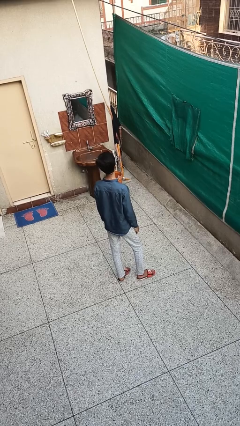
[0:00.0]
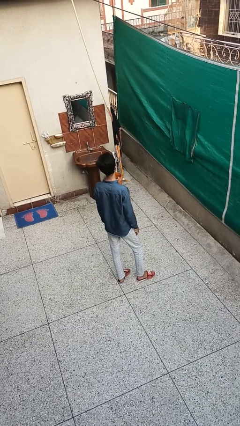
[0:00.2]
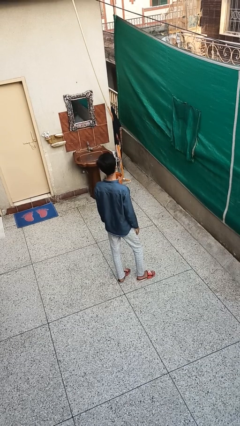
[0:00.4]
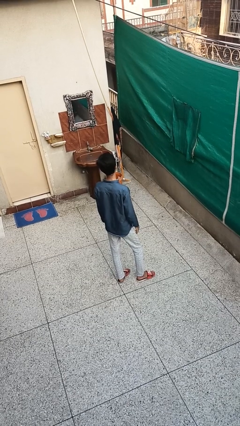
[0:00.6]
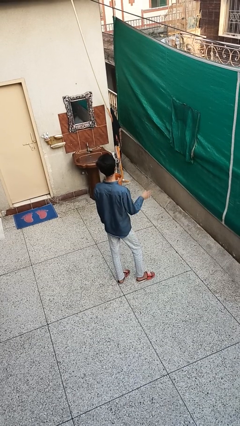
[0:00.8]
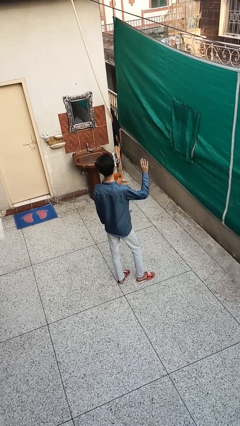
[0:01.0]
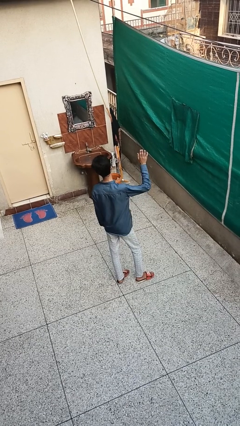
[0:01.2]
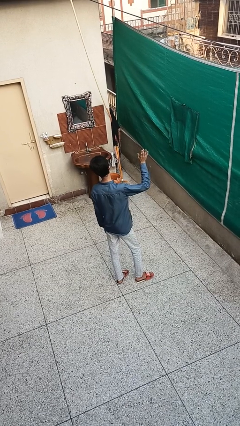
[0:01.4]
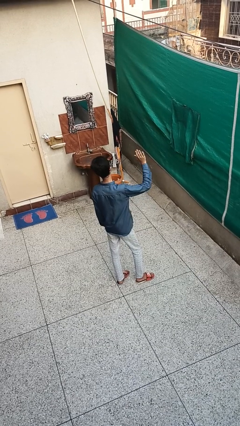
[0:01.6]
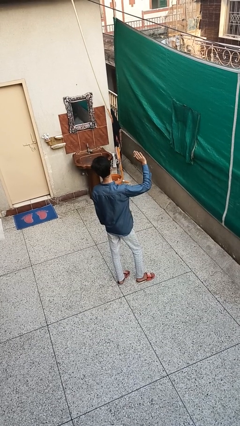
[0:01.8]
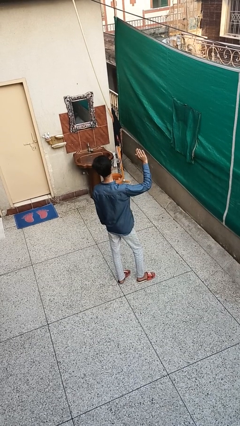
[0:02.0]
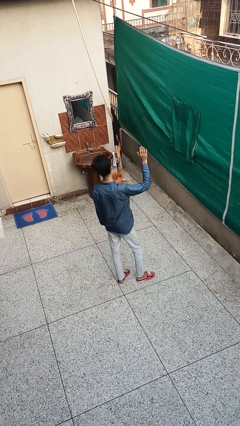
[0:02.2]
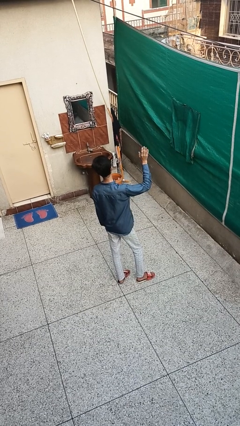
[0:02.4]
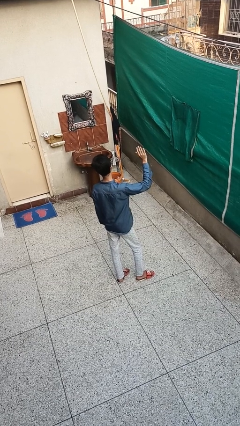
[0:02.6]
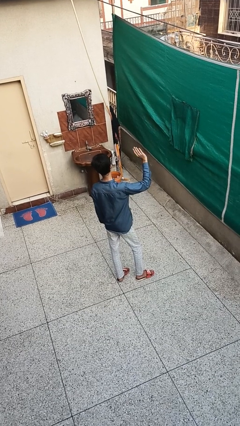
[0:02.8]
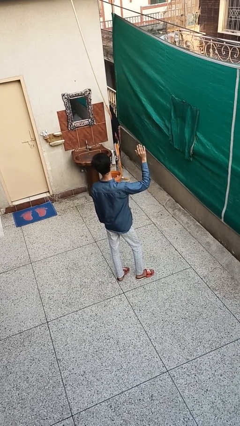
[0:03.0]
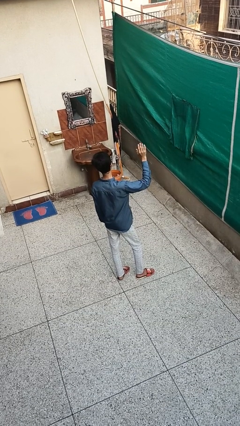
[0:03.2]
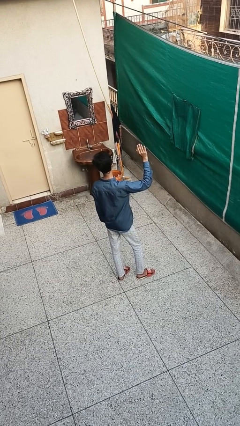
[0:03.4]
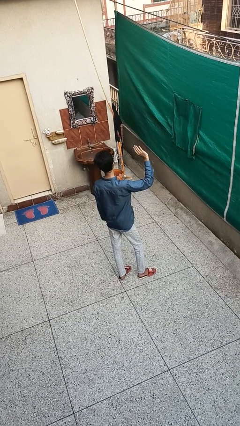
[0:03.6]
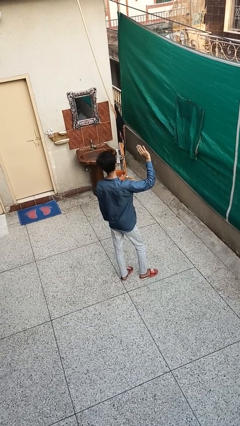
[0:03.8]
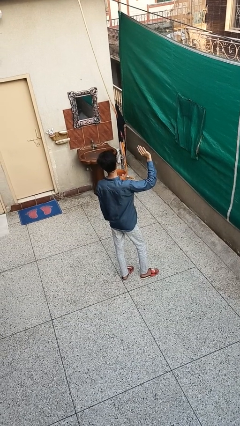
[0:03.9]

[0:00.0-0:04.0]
person waves at person

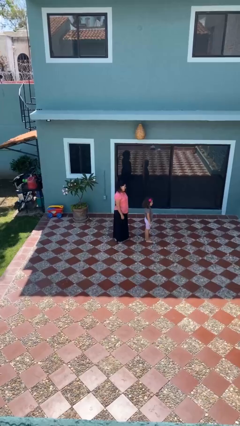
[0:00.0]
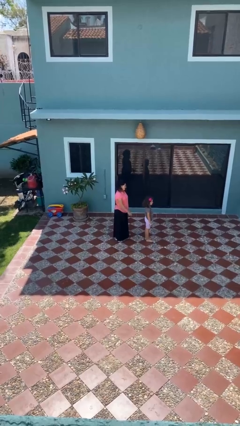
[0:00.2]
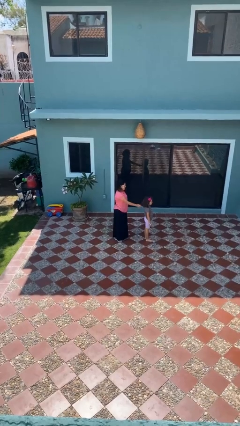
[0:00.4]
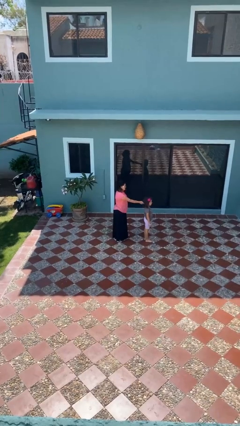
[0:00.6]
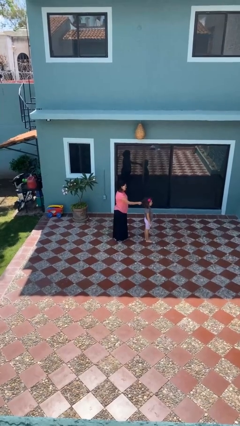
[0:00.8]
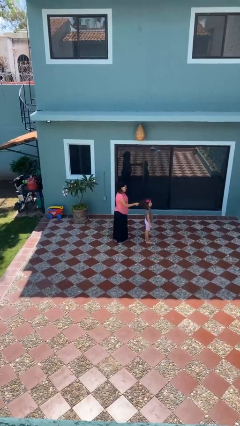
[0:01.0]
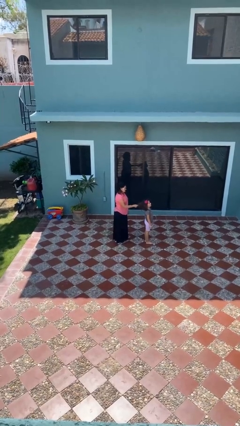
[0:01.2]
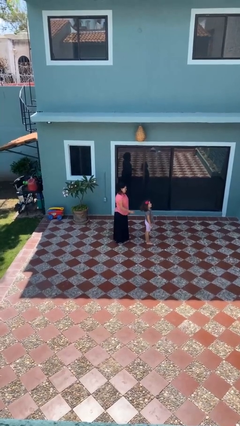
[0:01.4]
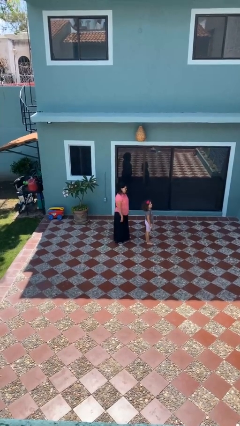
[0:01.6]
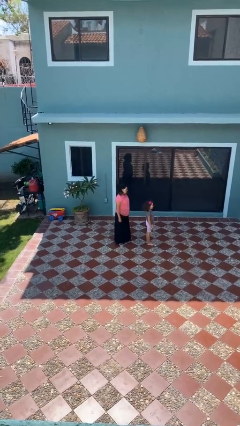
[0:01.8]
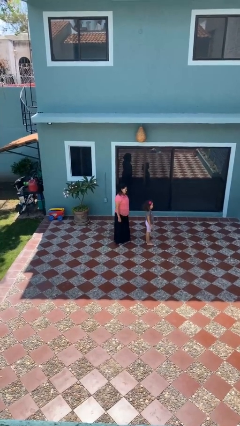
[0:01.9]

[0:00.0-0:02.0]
person grabs person by hair

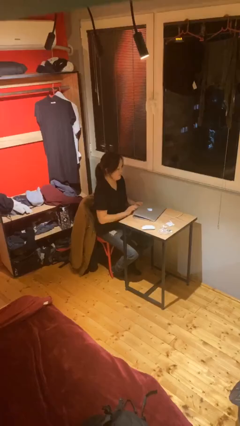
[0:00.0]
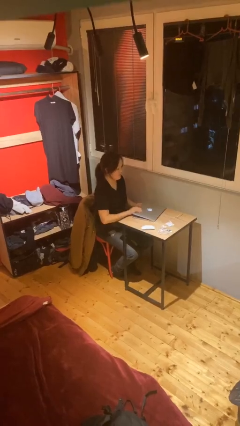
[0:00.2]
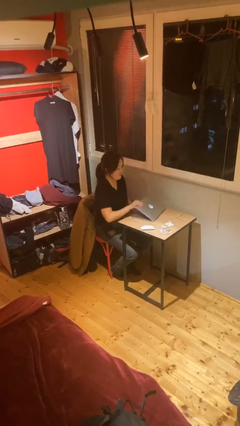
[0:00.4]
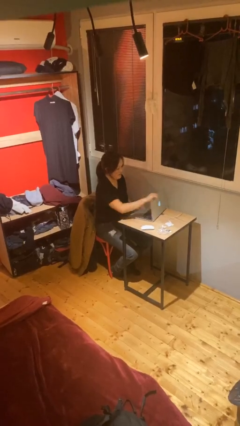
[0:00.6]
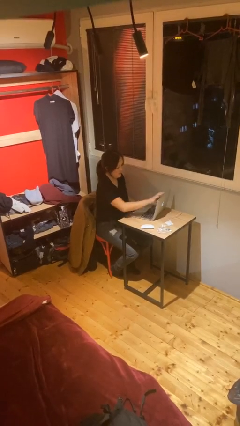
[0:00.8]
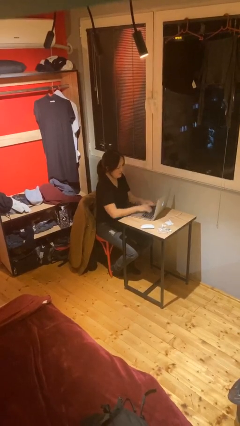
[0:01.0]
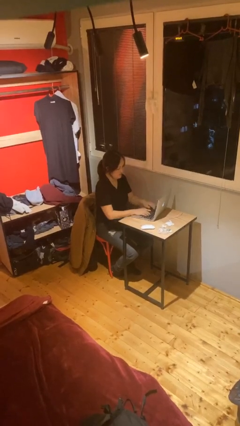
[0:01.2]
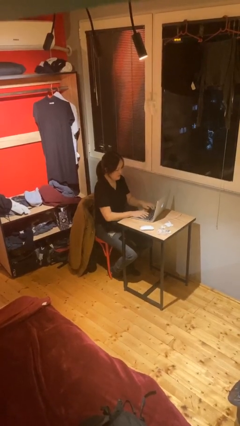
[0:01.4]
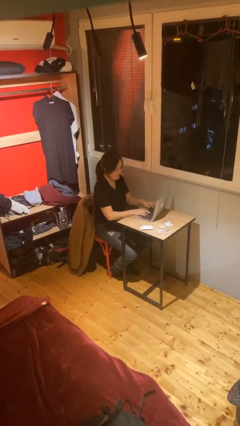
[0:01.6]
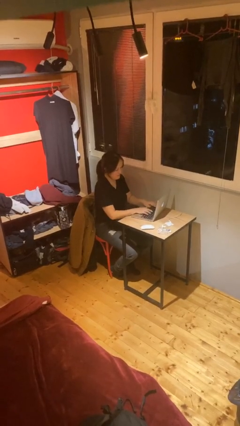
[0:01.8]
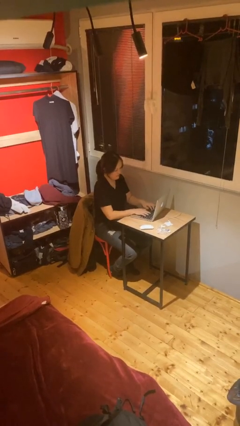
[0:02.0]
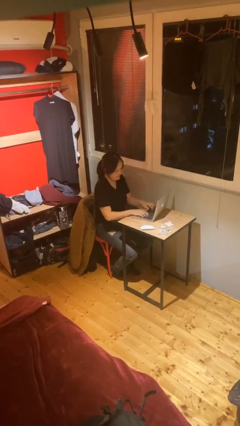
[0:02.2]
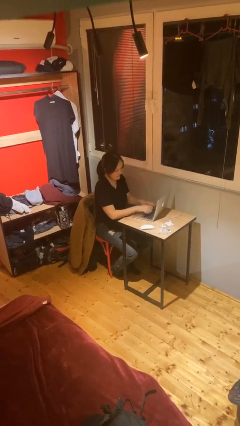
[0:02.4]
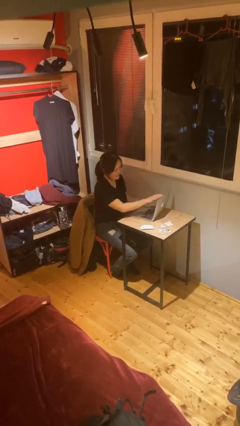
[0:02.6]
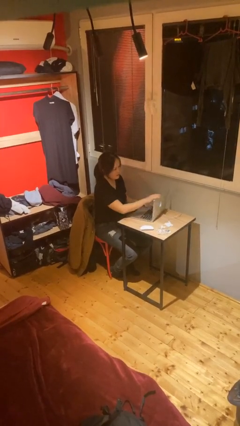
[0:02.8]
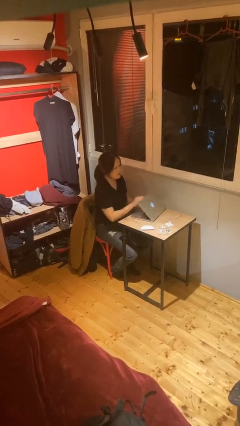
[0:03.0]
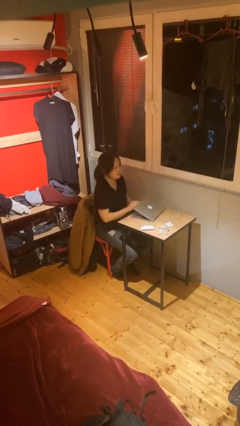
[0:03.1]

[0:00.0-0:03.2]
person interacts with laptop

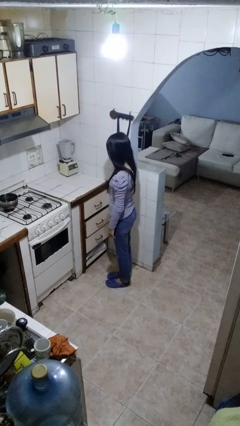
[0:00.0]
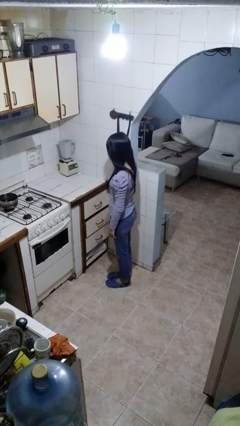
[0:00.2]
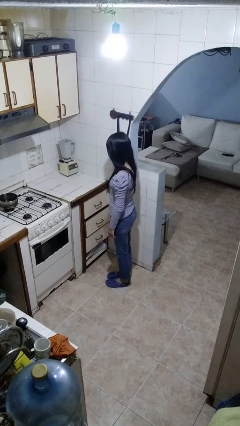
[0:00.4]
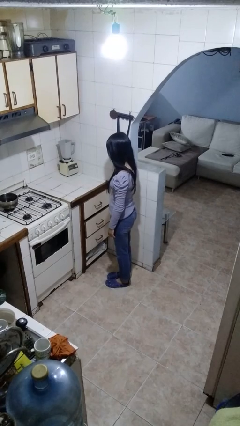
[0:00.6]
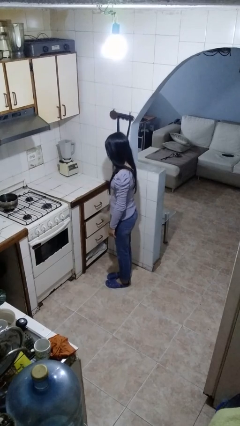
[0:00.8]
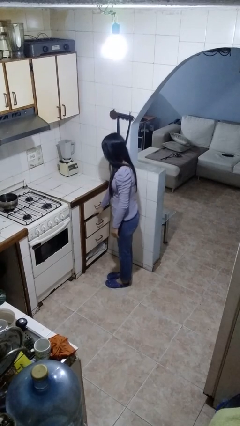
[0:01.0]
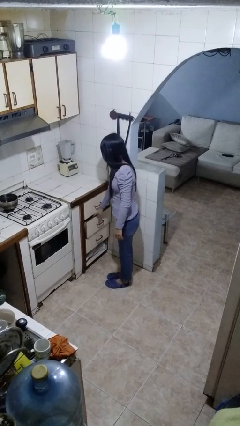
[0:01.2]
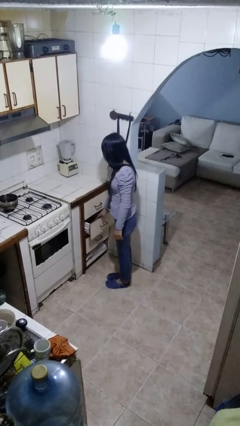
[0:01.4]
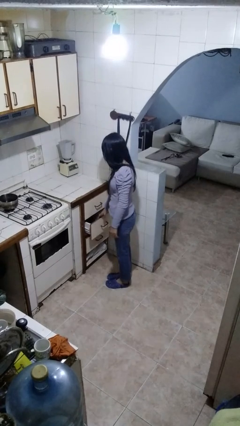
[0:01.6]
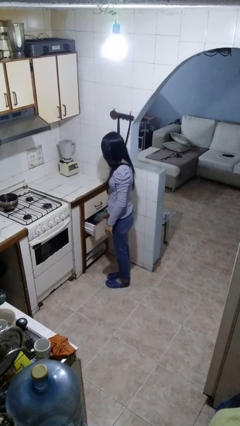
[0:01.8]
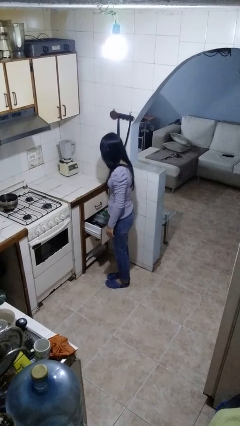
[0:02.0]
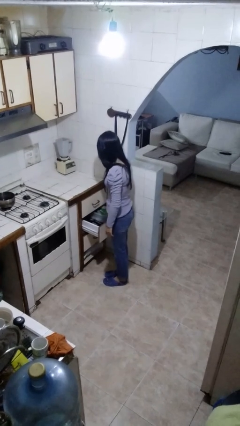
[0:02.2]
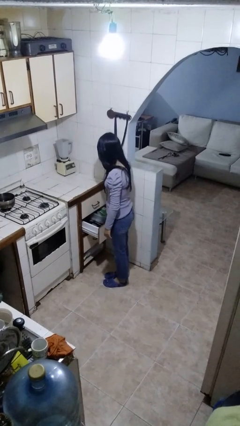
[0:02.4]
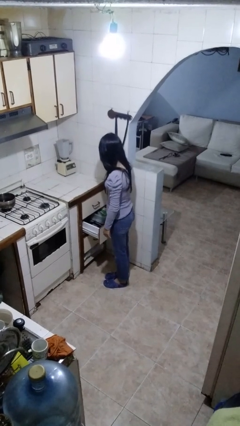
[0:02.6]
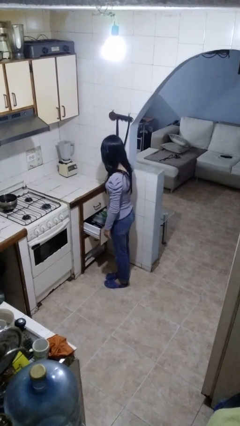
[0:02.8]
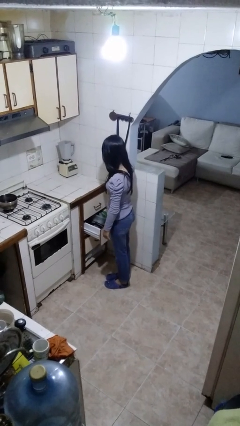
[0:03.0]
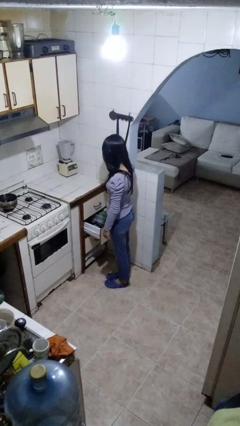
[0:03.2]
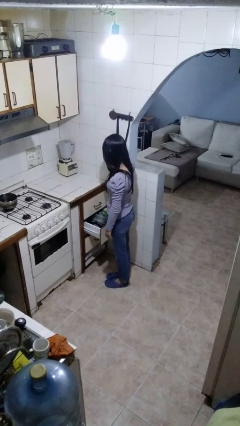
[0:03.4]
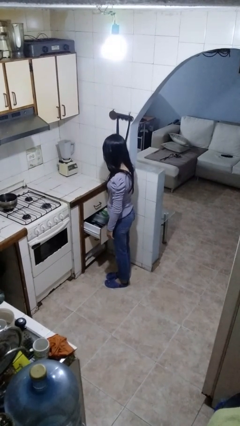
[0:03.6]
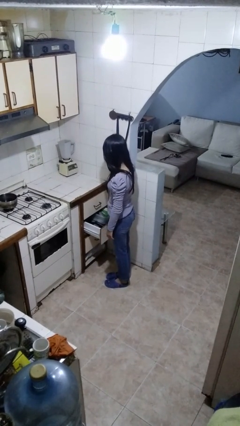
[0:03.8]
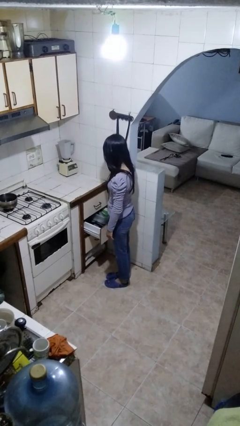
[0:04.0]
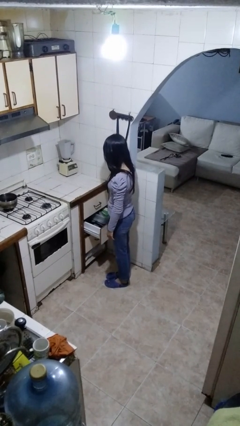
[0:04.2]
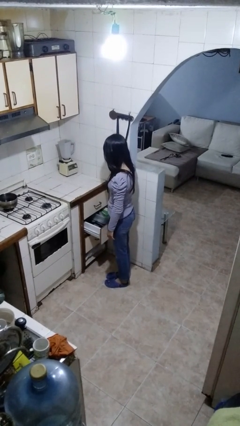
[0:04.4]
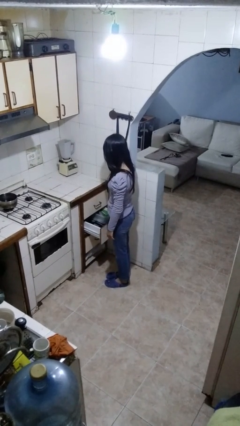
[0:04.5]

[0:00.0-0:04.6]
person opens cabinet

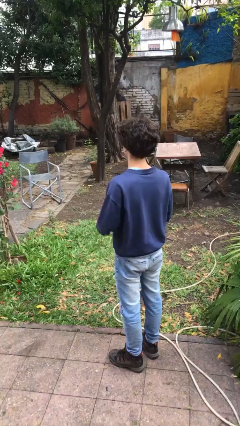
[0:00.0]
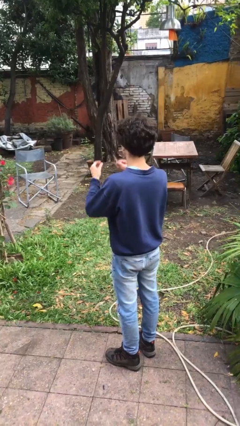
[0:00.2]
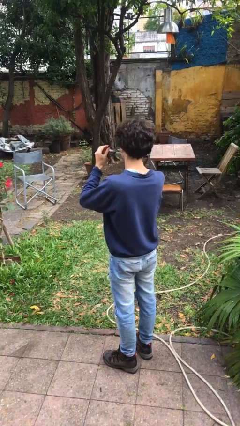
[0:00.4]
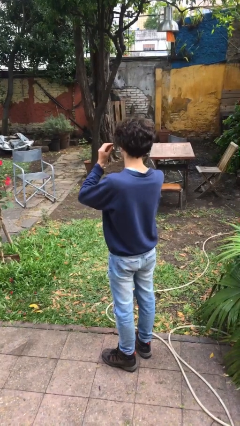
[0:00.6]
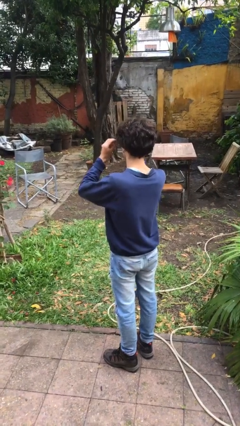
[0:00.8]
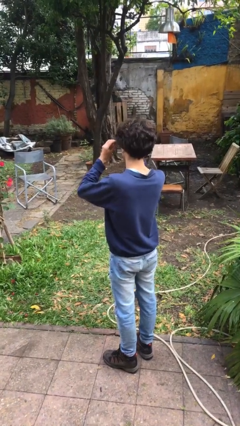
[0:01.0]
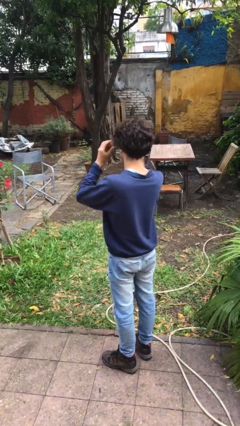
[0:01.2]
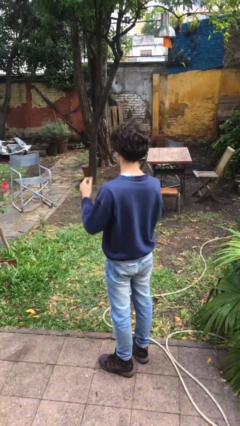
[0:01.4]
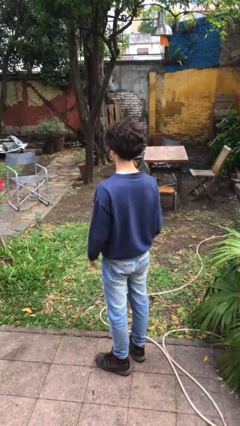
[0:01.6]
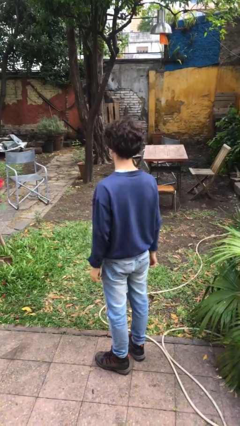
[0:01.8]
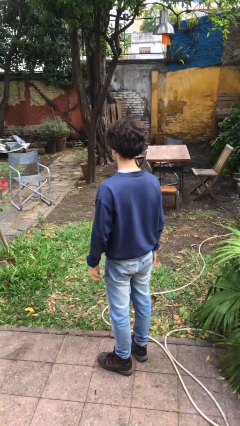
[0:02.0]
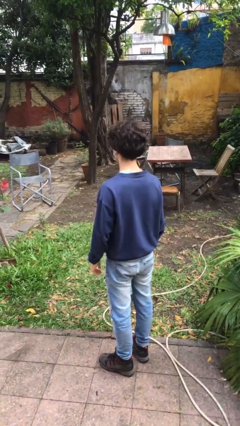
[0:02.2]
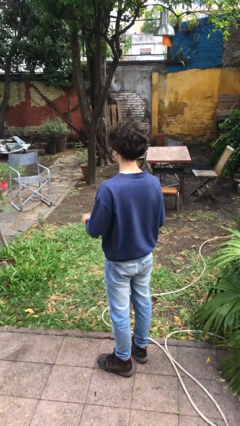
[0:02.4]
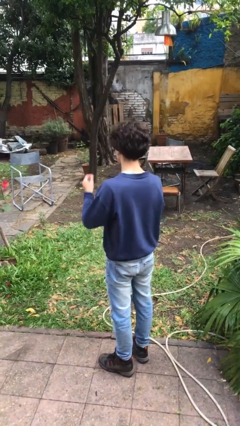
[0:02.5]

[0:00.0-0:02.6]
person puts on glasses

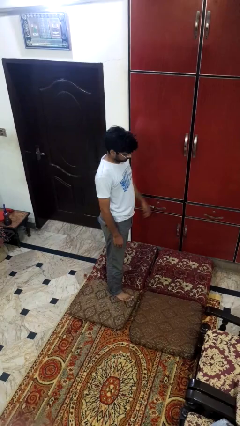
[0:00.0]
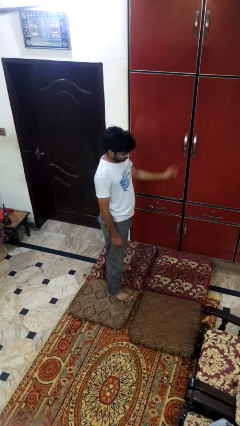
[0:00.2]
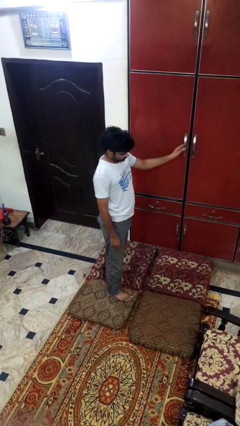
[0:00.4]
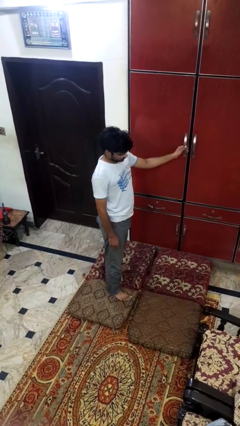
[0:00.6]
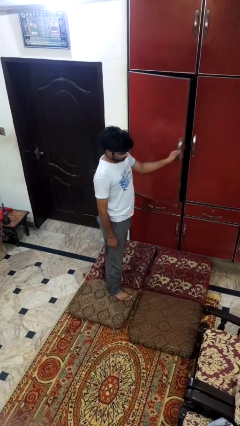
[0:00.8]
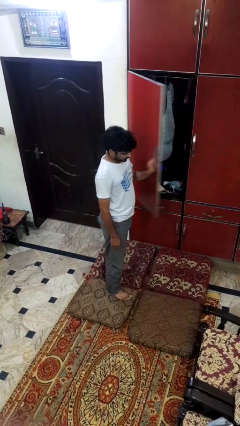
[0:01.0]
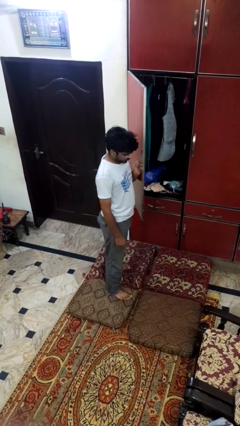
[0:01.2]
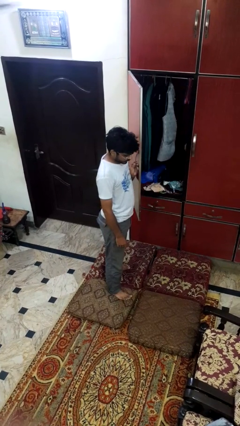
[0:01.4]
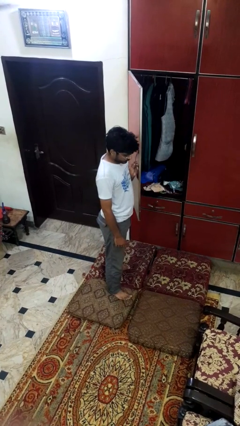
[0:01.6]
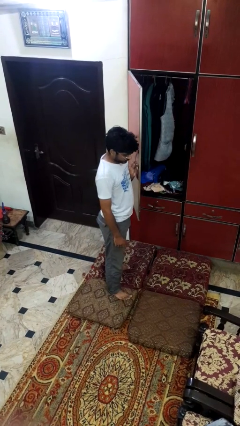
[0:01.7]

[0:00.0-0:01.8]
person opens closet door
